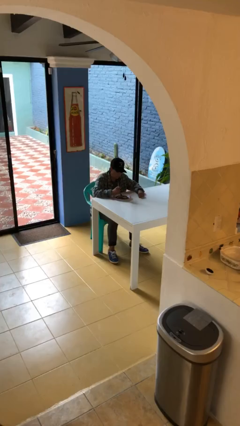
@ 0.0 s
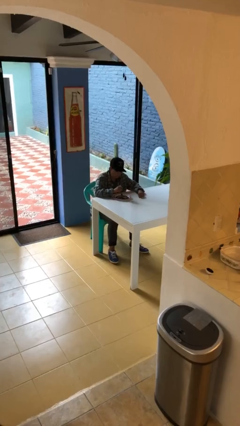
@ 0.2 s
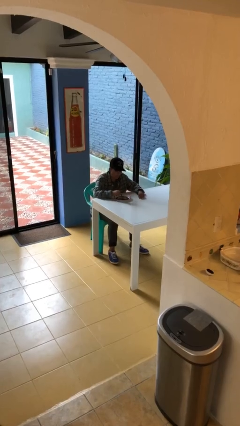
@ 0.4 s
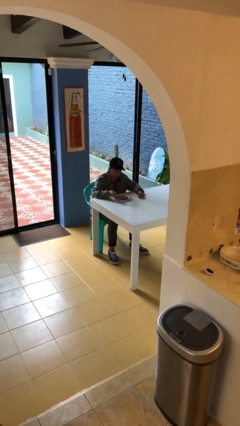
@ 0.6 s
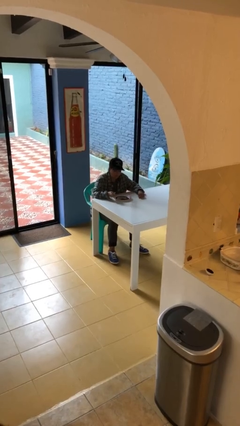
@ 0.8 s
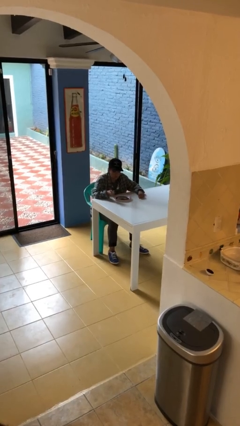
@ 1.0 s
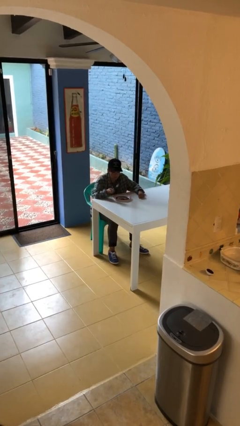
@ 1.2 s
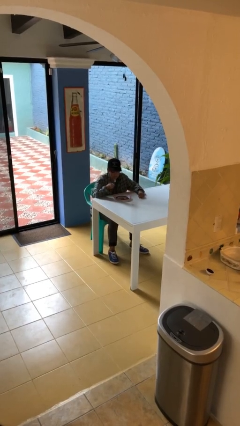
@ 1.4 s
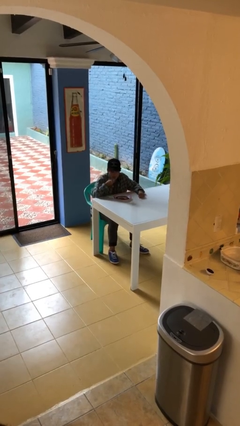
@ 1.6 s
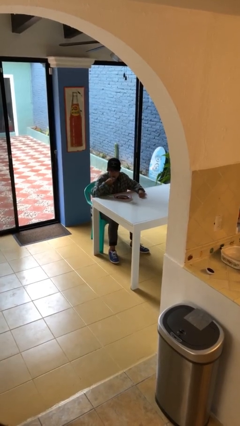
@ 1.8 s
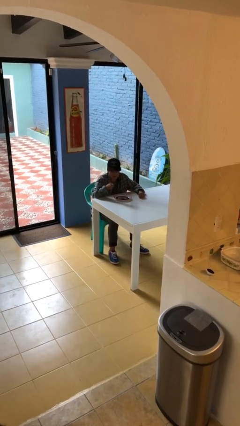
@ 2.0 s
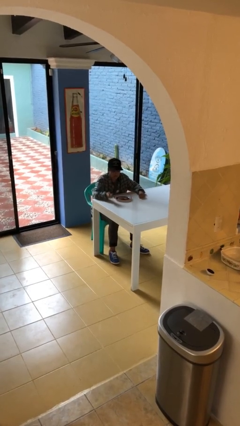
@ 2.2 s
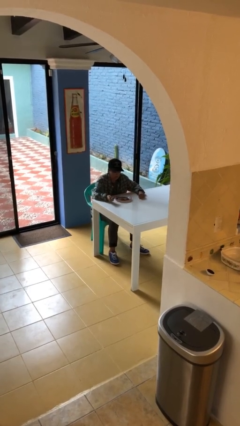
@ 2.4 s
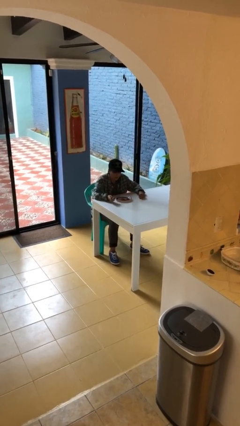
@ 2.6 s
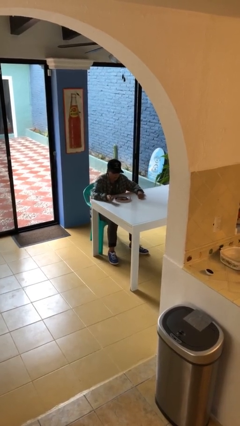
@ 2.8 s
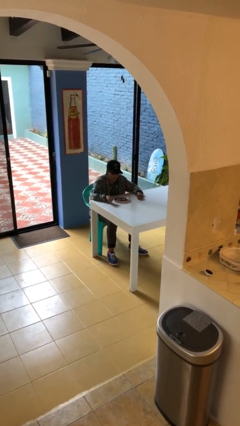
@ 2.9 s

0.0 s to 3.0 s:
person eats with utensil

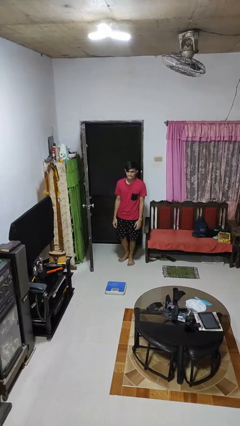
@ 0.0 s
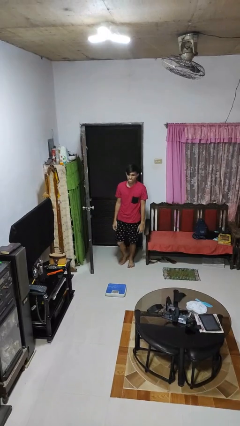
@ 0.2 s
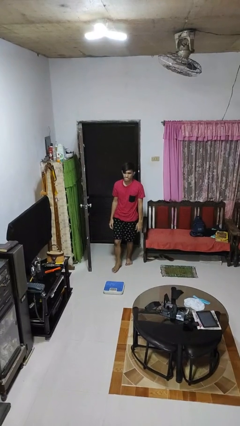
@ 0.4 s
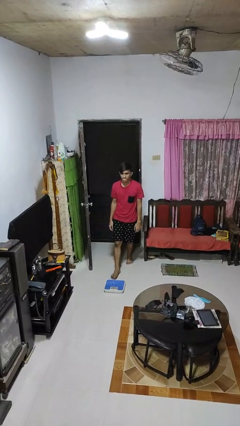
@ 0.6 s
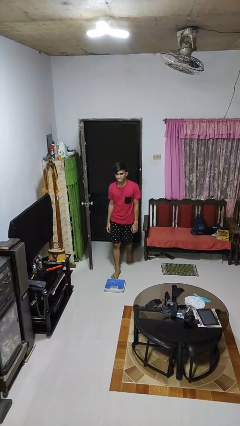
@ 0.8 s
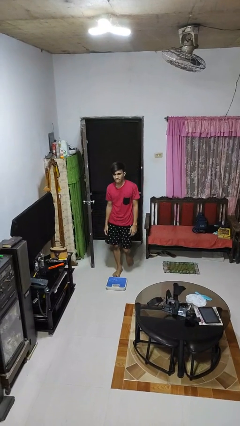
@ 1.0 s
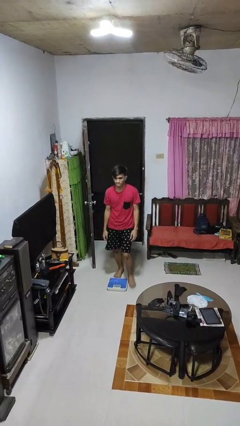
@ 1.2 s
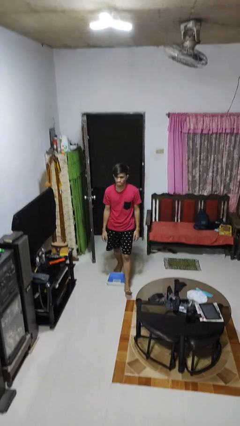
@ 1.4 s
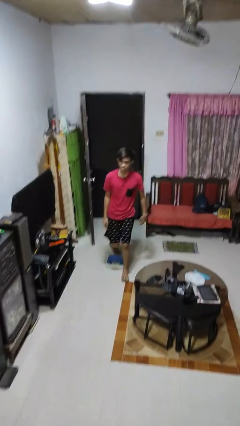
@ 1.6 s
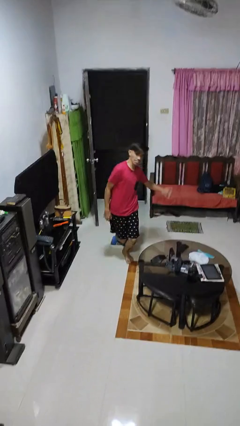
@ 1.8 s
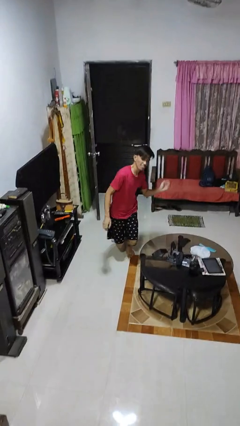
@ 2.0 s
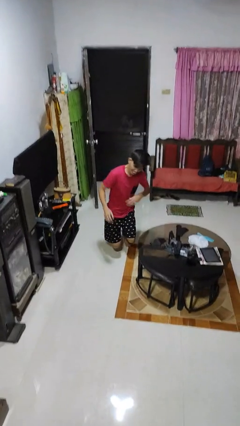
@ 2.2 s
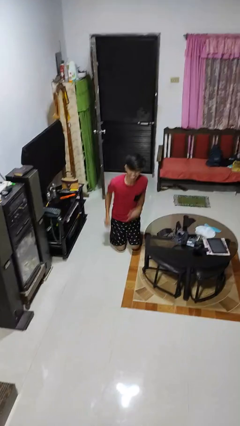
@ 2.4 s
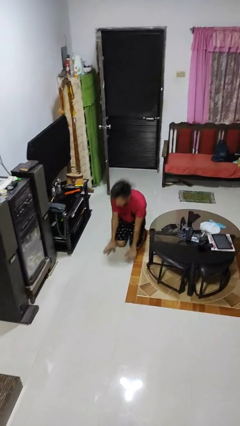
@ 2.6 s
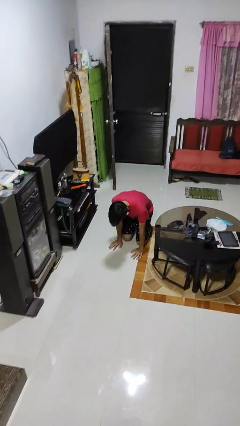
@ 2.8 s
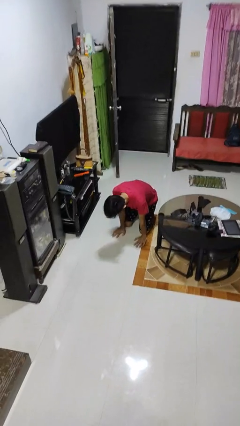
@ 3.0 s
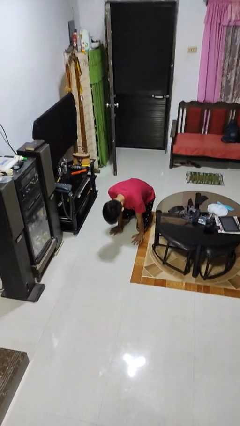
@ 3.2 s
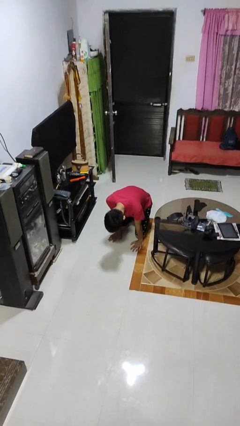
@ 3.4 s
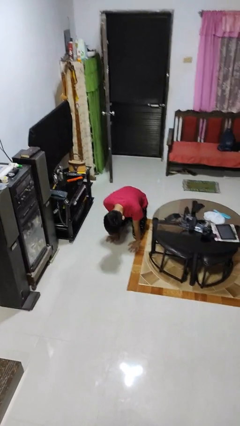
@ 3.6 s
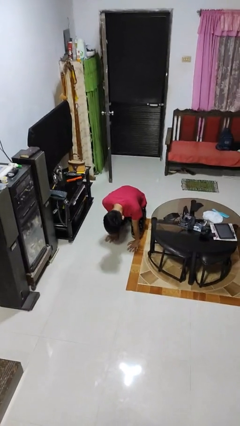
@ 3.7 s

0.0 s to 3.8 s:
person trips on object on floor

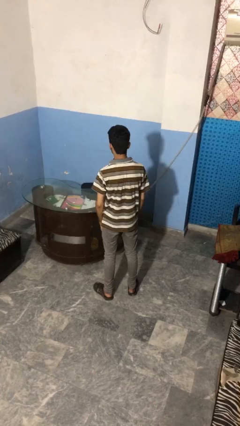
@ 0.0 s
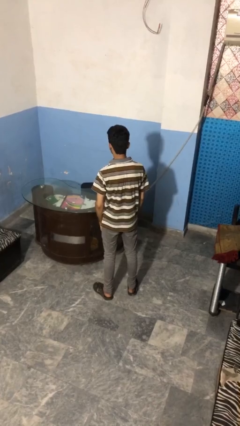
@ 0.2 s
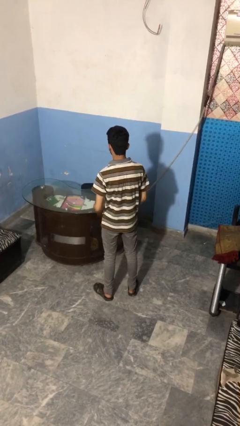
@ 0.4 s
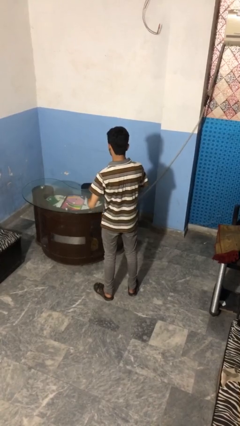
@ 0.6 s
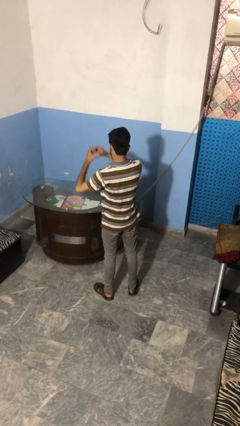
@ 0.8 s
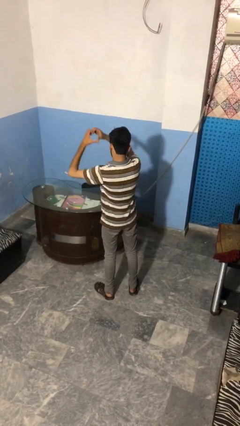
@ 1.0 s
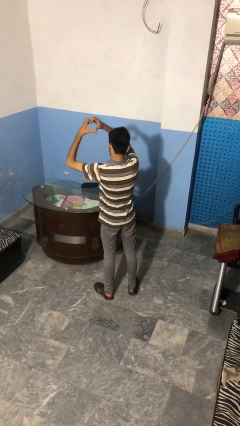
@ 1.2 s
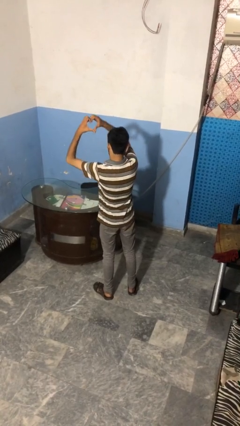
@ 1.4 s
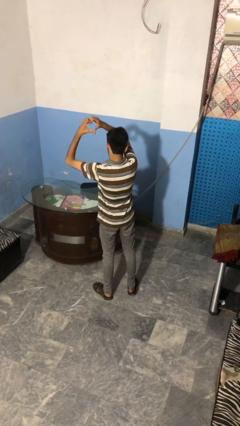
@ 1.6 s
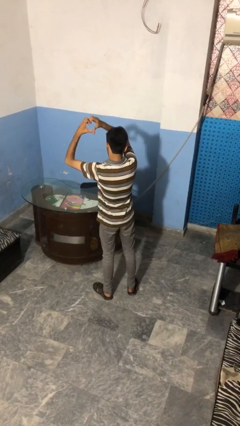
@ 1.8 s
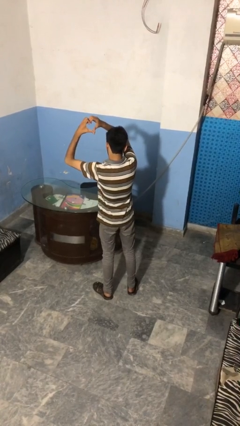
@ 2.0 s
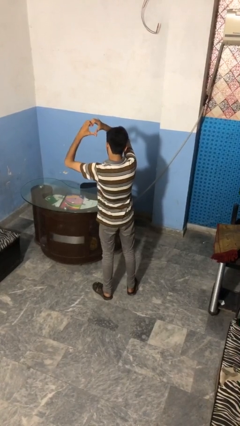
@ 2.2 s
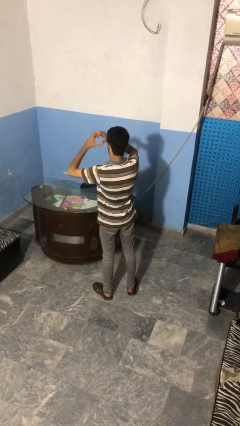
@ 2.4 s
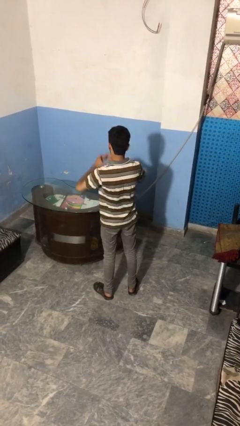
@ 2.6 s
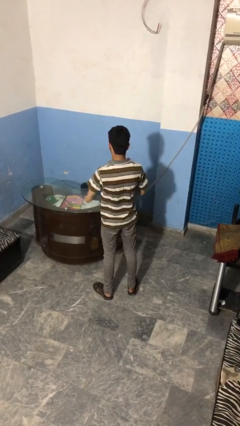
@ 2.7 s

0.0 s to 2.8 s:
person gestures heart

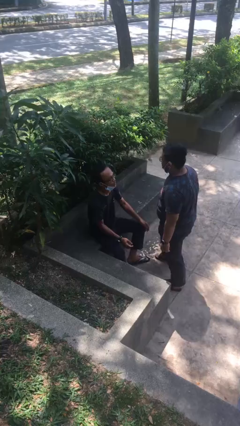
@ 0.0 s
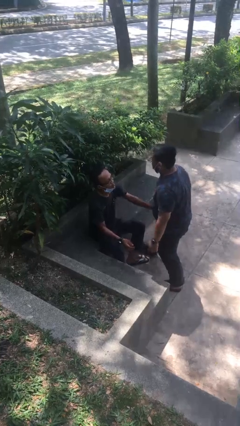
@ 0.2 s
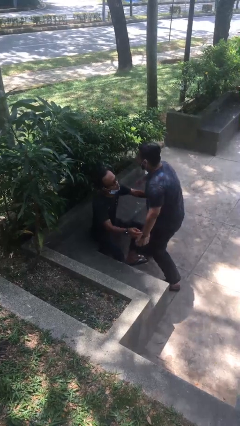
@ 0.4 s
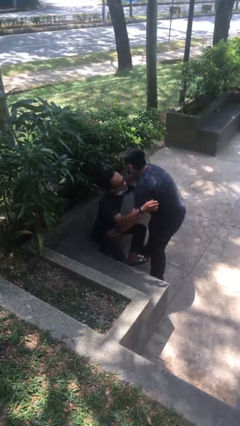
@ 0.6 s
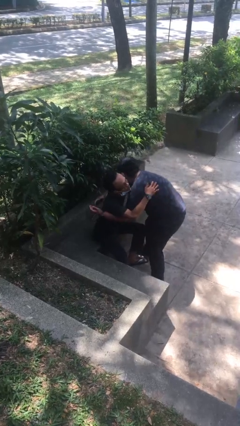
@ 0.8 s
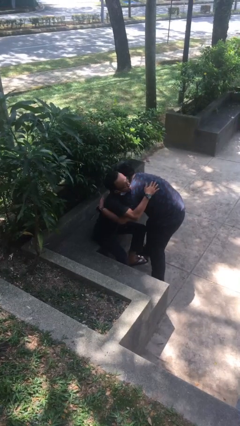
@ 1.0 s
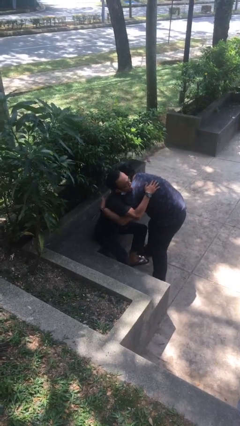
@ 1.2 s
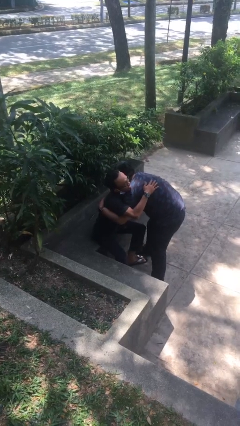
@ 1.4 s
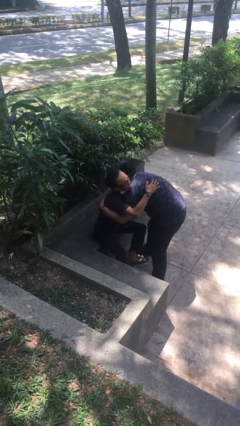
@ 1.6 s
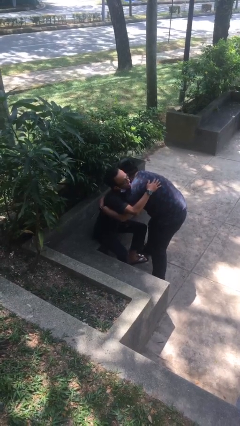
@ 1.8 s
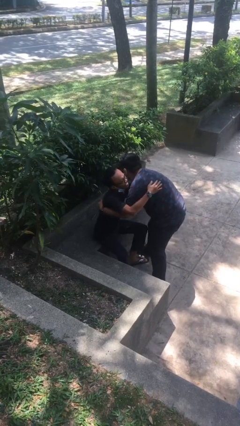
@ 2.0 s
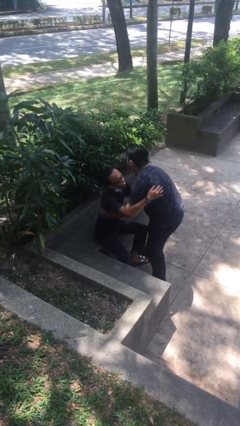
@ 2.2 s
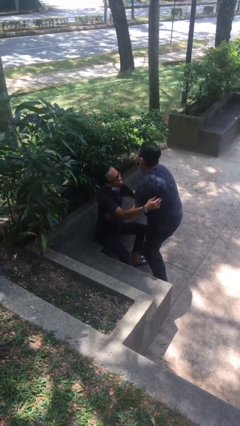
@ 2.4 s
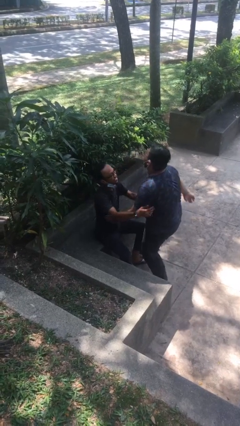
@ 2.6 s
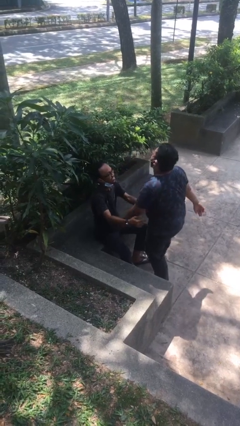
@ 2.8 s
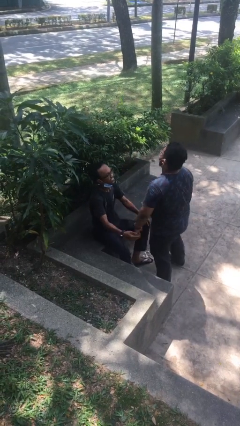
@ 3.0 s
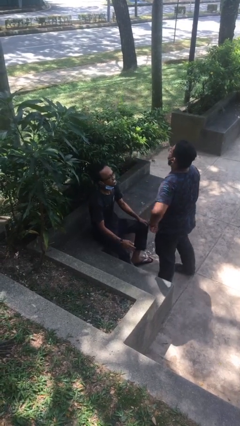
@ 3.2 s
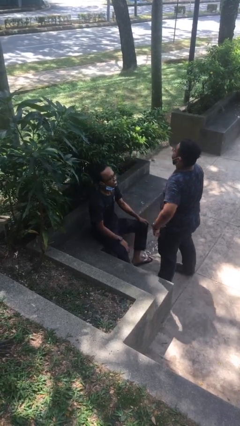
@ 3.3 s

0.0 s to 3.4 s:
person embraces person

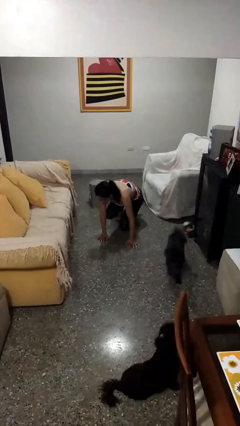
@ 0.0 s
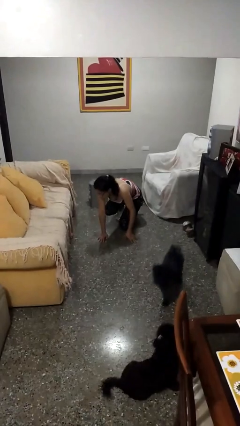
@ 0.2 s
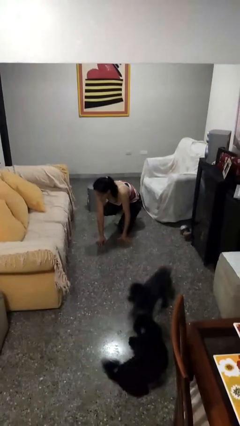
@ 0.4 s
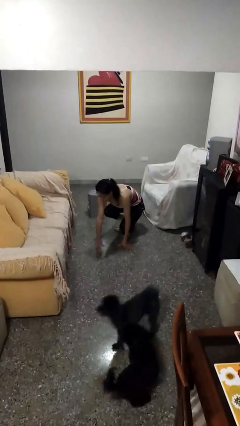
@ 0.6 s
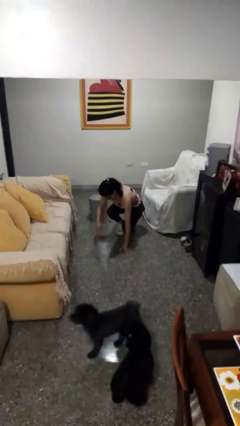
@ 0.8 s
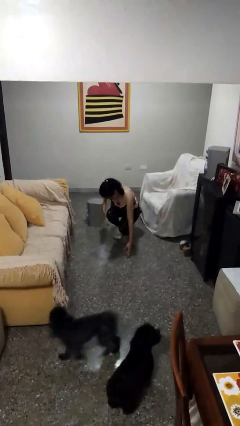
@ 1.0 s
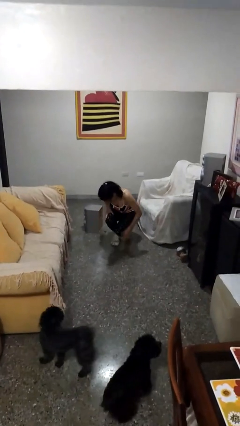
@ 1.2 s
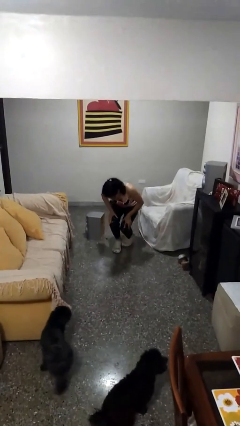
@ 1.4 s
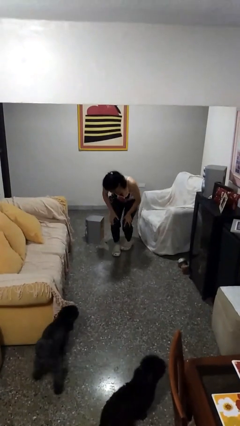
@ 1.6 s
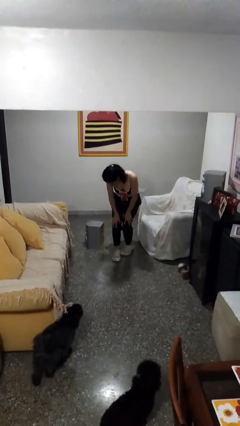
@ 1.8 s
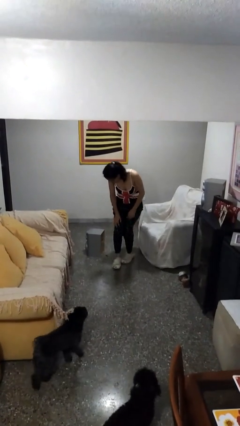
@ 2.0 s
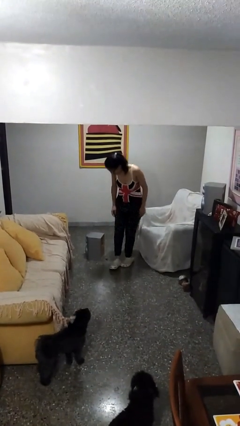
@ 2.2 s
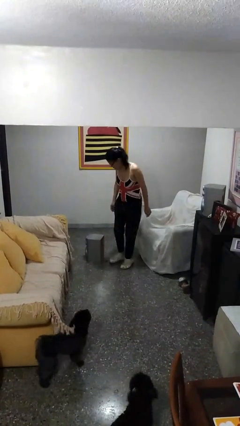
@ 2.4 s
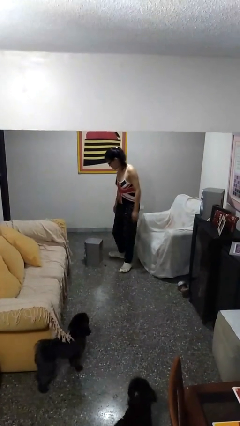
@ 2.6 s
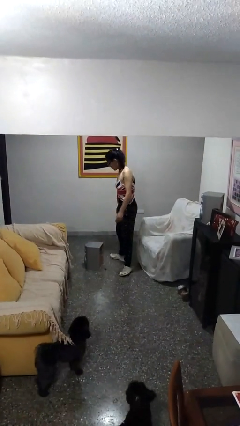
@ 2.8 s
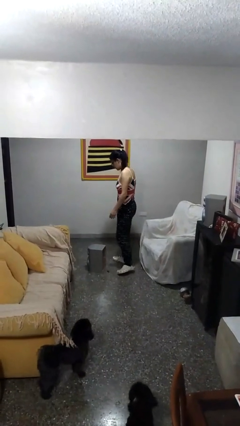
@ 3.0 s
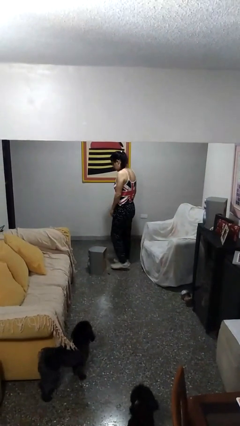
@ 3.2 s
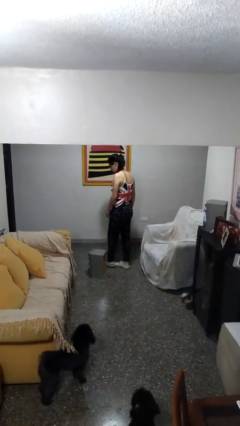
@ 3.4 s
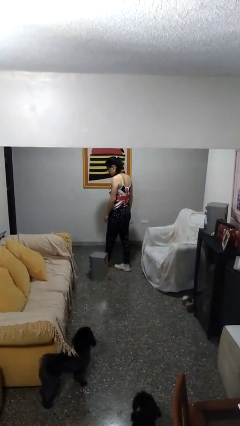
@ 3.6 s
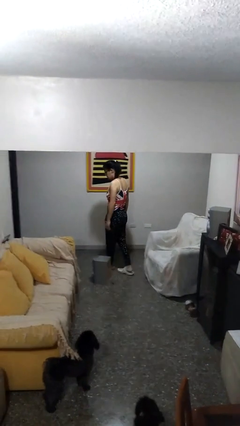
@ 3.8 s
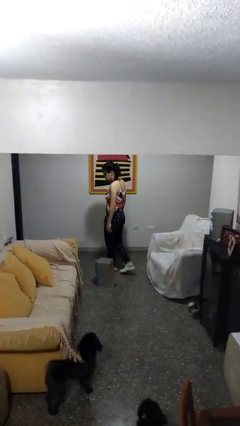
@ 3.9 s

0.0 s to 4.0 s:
person stands up from floor

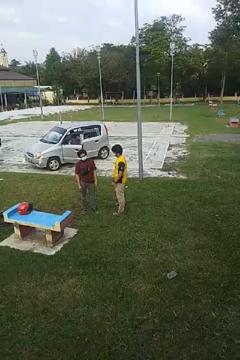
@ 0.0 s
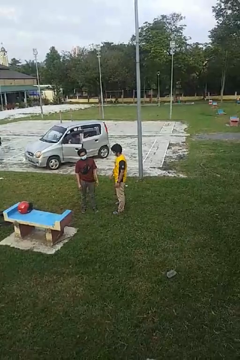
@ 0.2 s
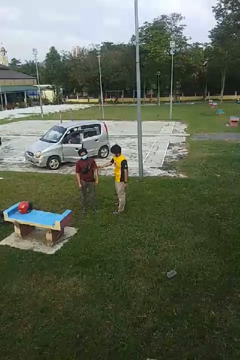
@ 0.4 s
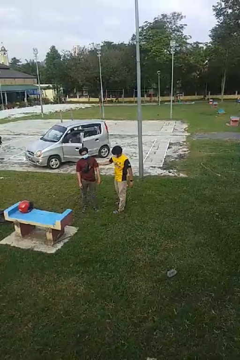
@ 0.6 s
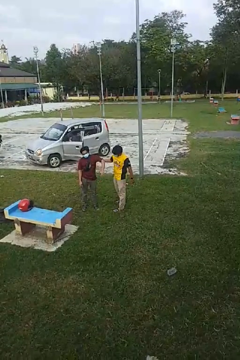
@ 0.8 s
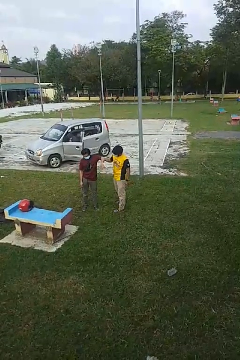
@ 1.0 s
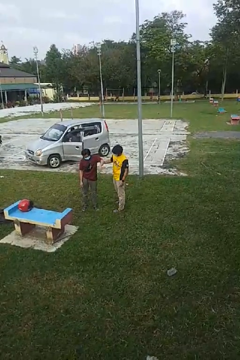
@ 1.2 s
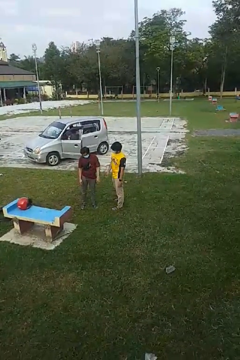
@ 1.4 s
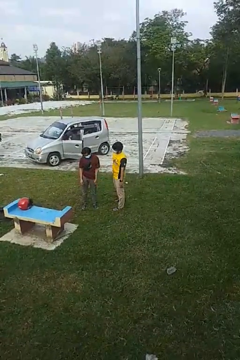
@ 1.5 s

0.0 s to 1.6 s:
person grabs person by bicep
